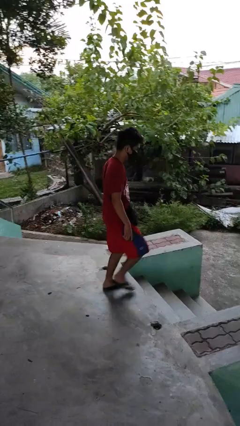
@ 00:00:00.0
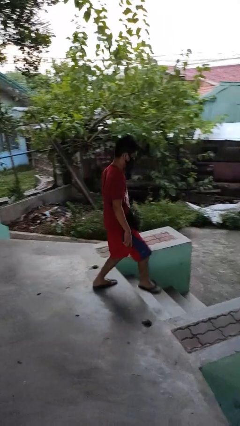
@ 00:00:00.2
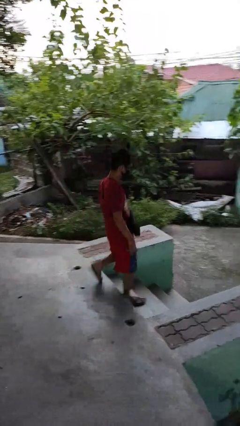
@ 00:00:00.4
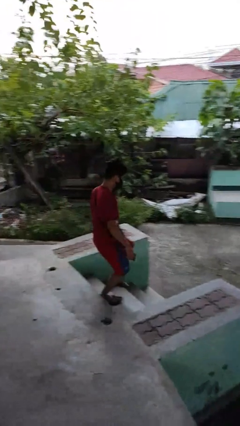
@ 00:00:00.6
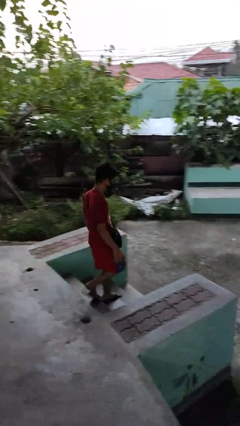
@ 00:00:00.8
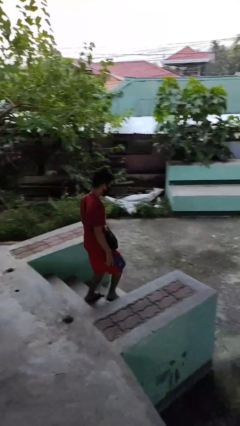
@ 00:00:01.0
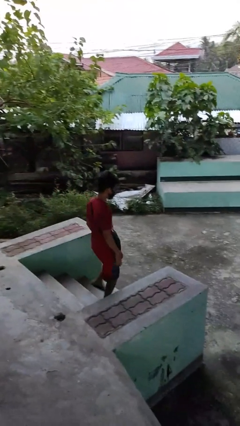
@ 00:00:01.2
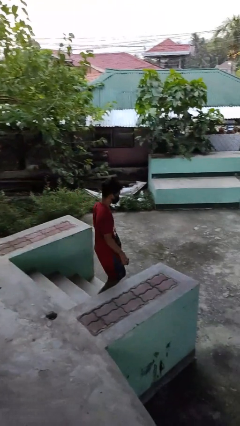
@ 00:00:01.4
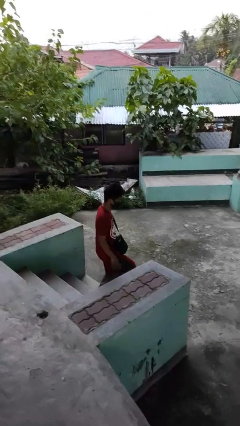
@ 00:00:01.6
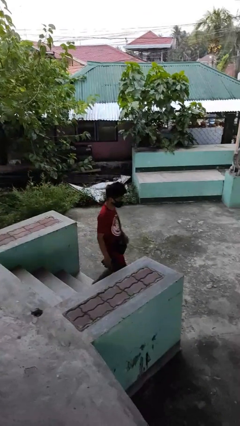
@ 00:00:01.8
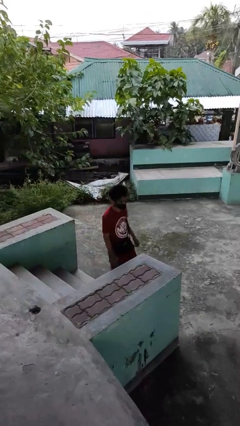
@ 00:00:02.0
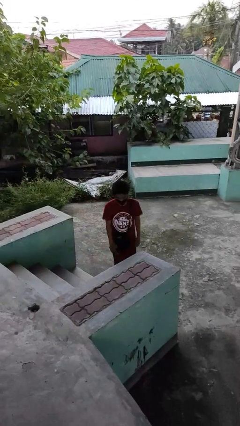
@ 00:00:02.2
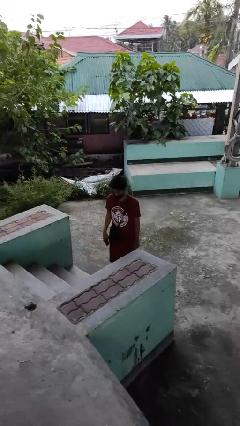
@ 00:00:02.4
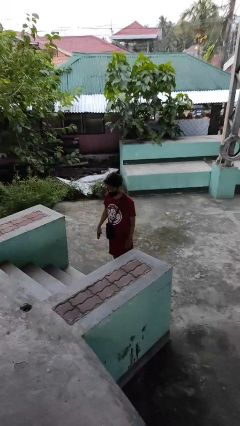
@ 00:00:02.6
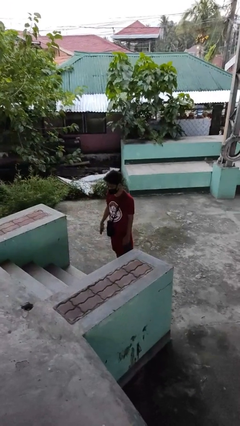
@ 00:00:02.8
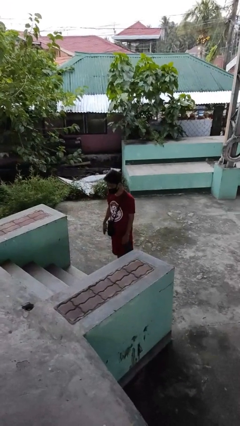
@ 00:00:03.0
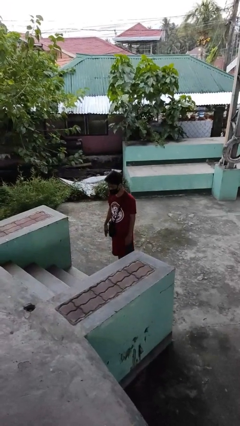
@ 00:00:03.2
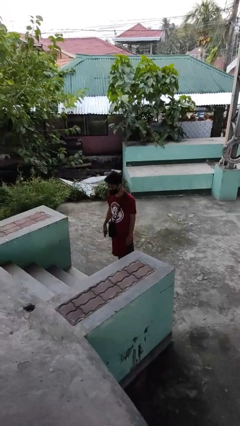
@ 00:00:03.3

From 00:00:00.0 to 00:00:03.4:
person climbs down stairs

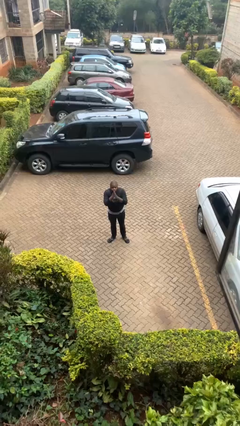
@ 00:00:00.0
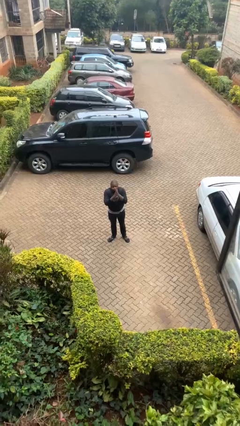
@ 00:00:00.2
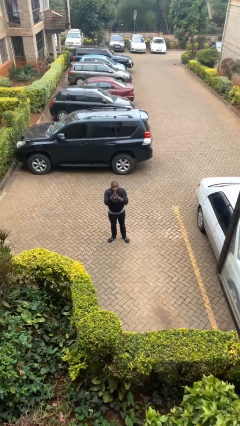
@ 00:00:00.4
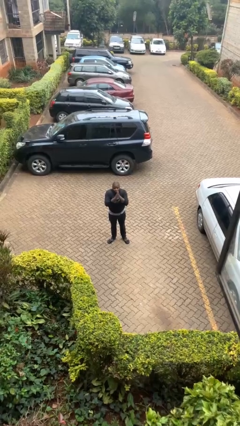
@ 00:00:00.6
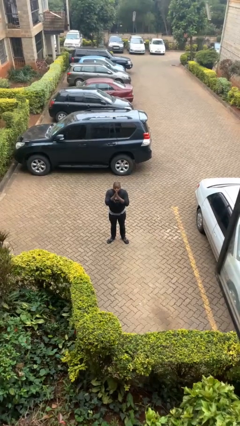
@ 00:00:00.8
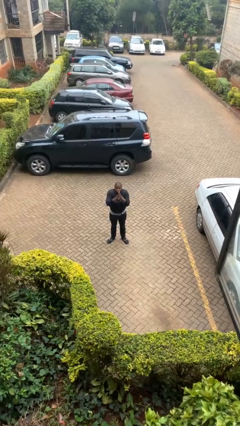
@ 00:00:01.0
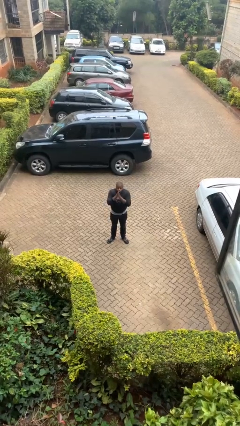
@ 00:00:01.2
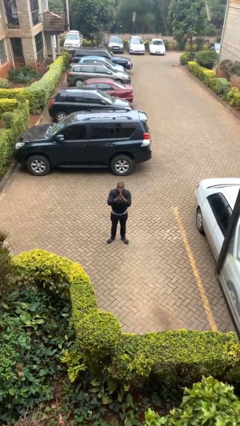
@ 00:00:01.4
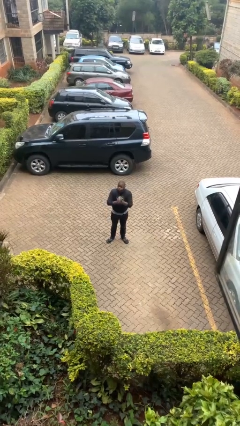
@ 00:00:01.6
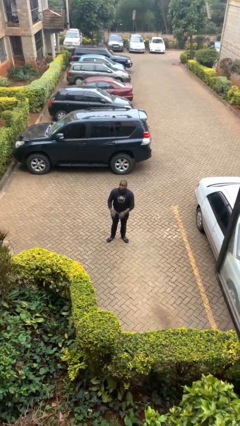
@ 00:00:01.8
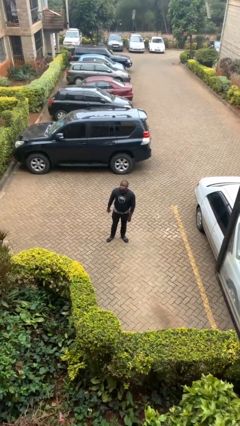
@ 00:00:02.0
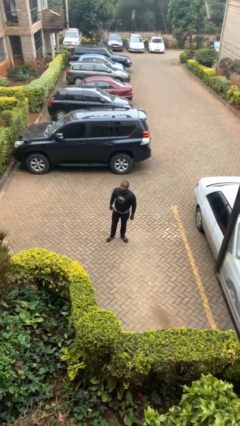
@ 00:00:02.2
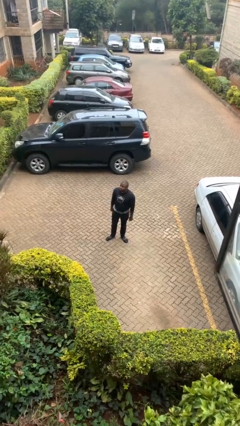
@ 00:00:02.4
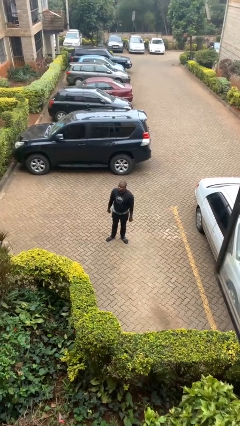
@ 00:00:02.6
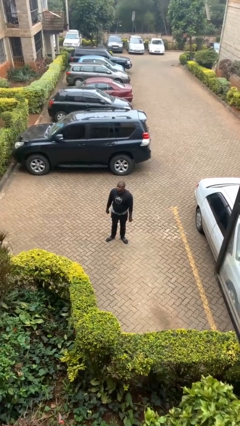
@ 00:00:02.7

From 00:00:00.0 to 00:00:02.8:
person blows into hands

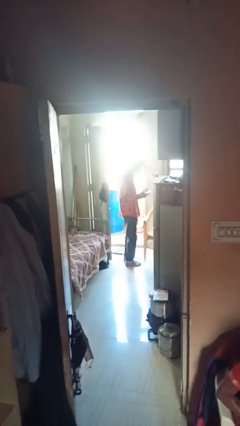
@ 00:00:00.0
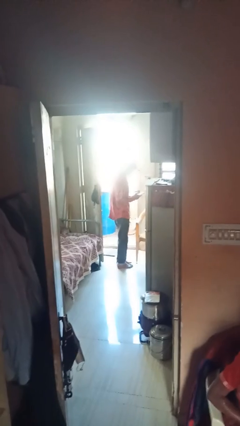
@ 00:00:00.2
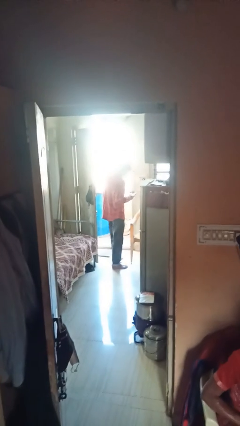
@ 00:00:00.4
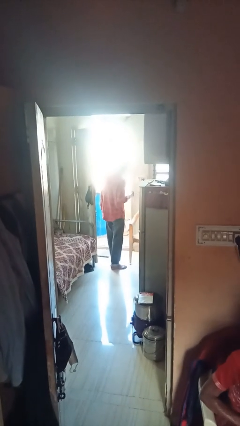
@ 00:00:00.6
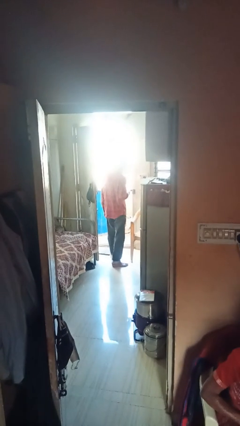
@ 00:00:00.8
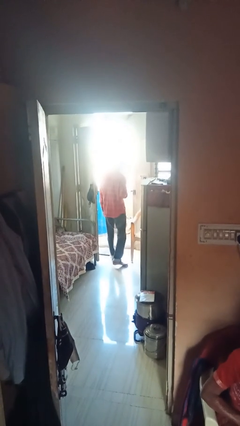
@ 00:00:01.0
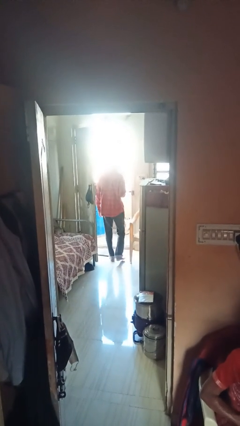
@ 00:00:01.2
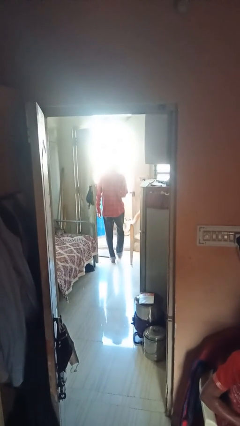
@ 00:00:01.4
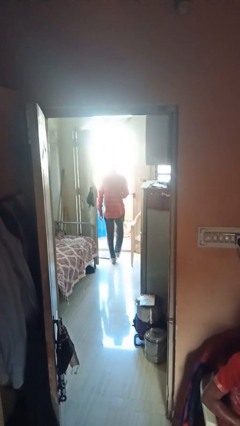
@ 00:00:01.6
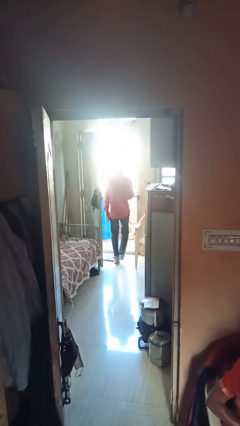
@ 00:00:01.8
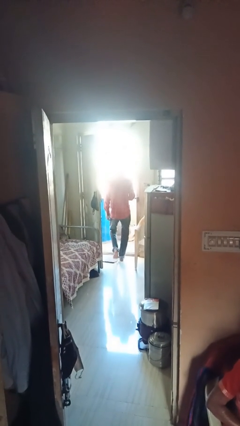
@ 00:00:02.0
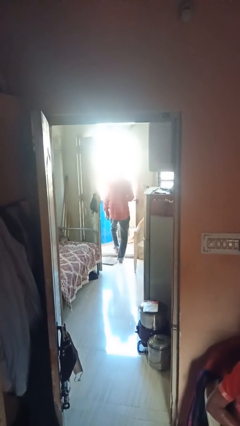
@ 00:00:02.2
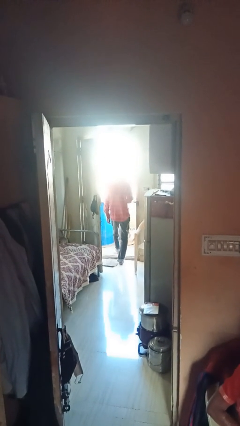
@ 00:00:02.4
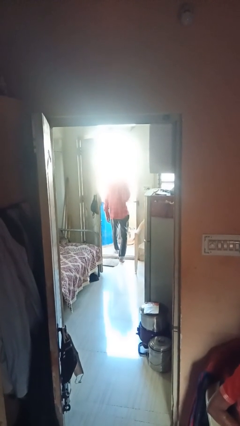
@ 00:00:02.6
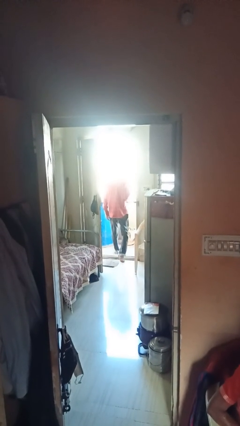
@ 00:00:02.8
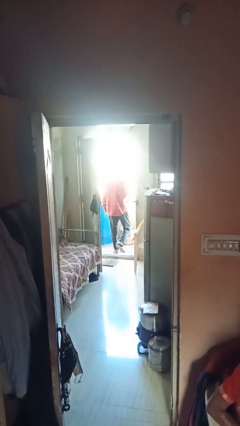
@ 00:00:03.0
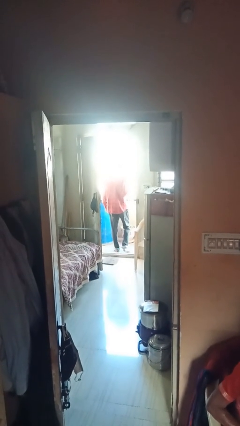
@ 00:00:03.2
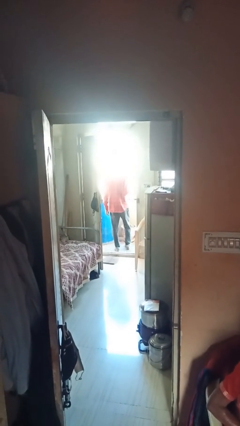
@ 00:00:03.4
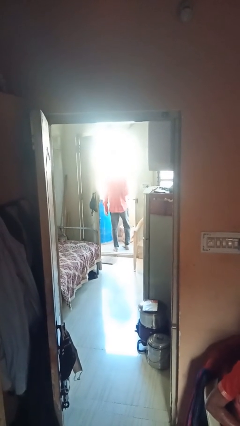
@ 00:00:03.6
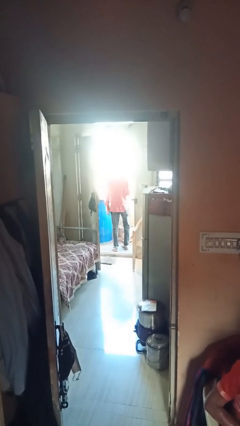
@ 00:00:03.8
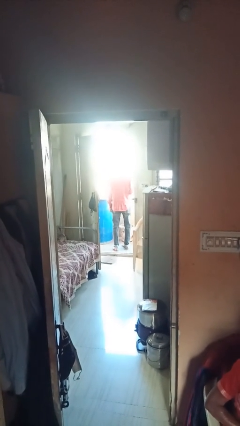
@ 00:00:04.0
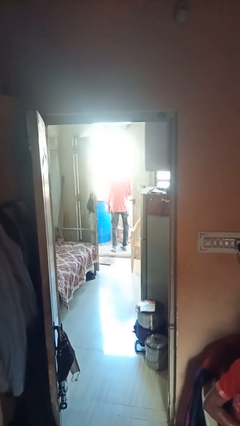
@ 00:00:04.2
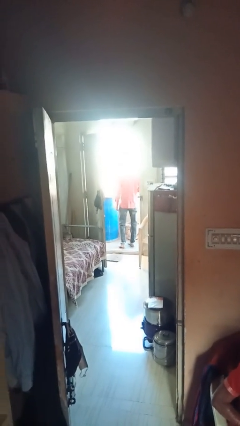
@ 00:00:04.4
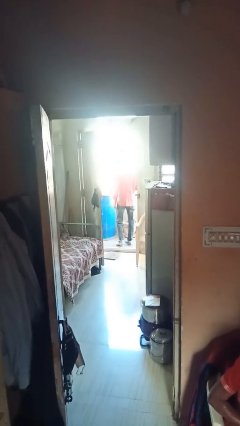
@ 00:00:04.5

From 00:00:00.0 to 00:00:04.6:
person exits scene through structure

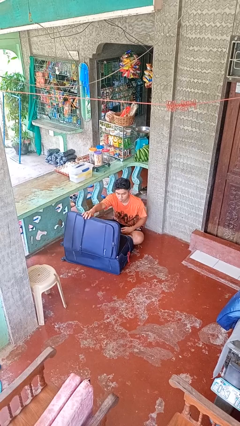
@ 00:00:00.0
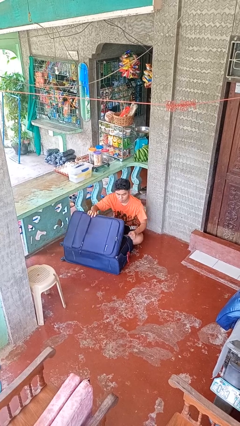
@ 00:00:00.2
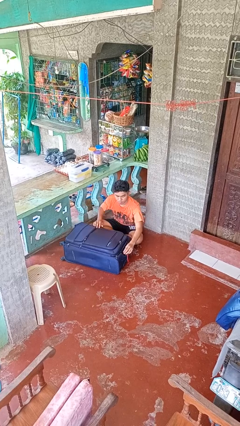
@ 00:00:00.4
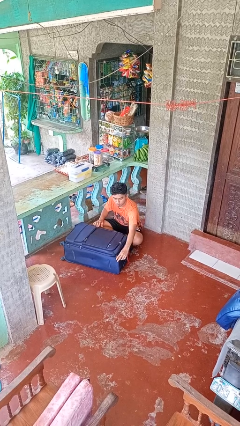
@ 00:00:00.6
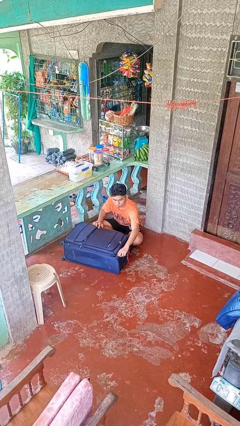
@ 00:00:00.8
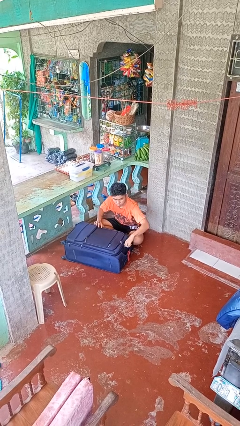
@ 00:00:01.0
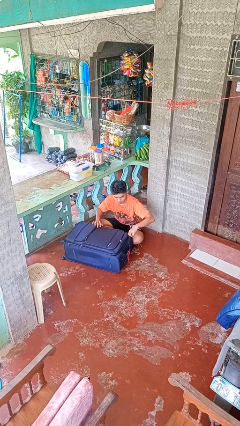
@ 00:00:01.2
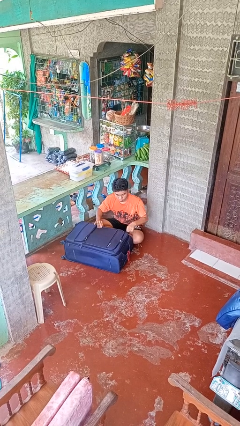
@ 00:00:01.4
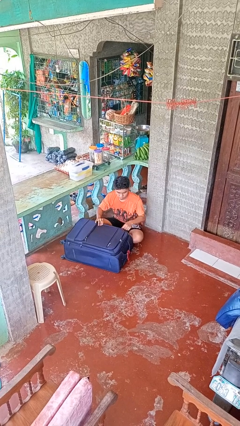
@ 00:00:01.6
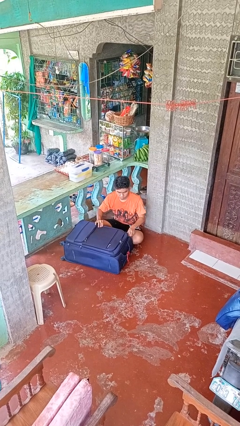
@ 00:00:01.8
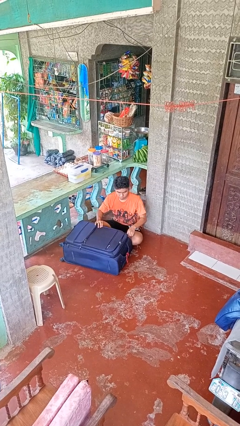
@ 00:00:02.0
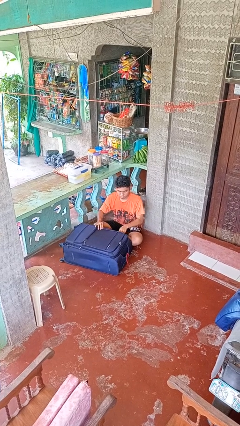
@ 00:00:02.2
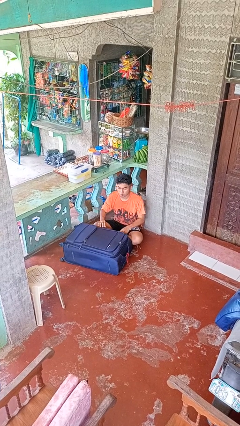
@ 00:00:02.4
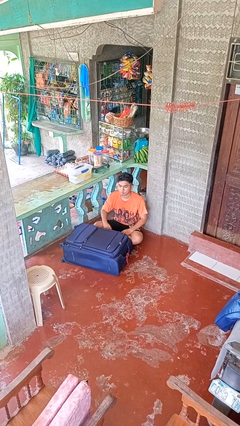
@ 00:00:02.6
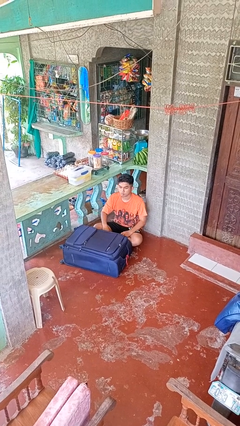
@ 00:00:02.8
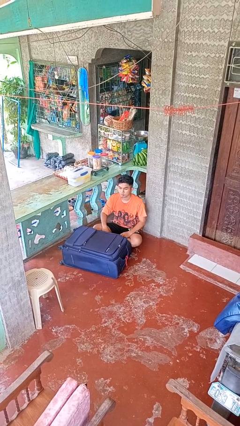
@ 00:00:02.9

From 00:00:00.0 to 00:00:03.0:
person closes suitcase

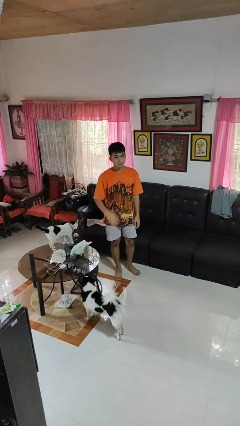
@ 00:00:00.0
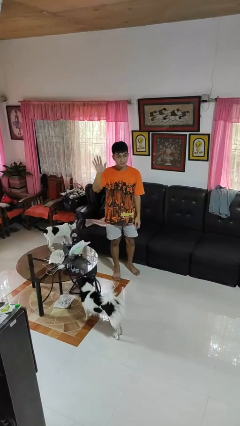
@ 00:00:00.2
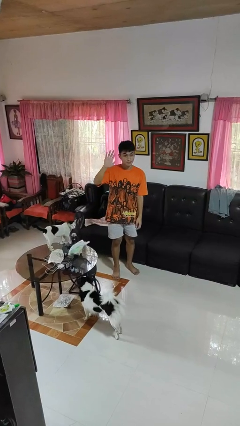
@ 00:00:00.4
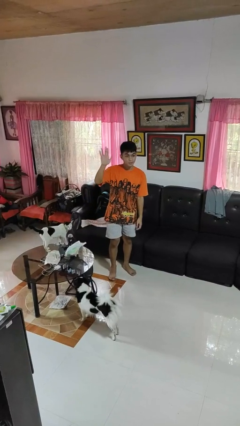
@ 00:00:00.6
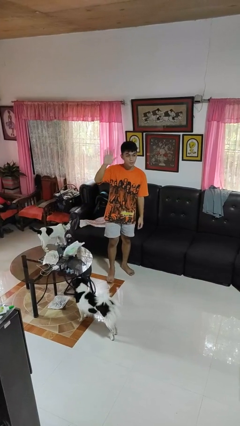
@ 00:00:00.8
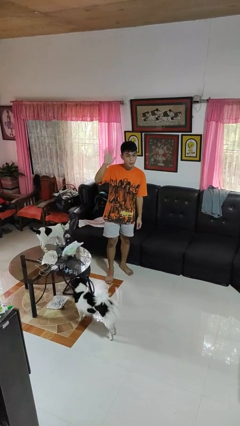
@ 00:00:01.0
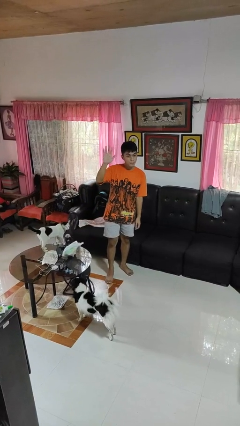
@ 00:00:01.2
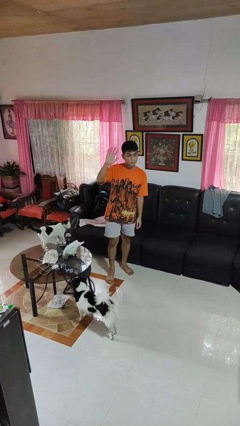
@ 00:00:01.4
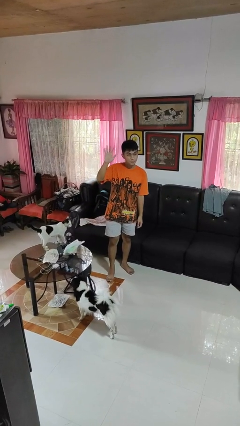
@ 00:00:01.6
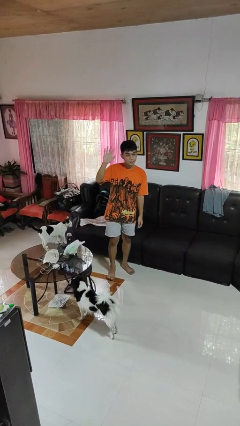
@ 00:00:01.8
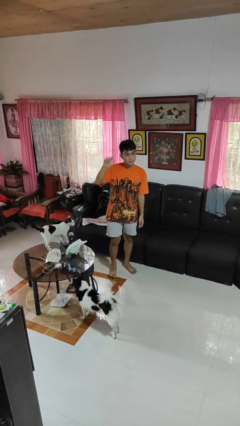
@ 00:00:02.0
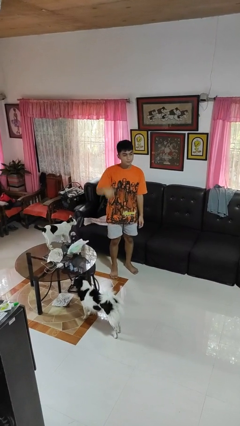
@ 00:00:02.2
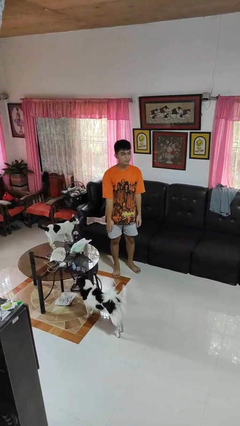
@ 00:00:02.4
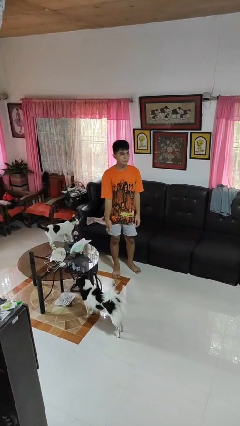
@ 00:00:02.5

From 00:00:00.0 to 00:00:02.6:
person waves at person

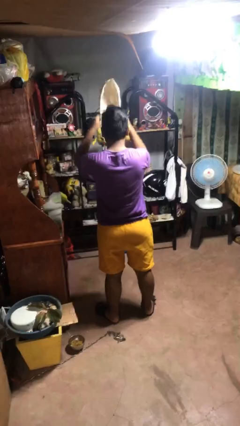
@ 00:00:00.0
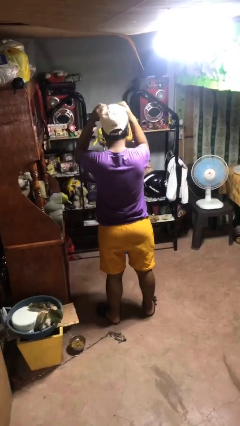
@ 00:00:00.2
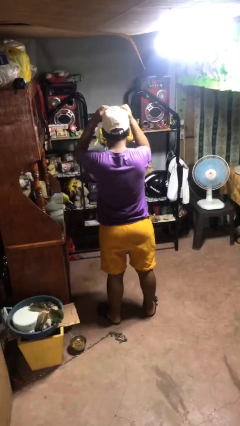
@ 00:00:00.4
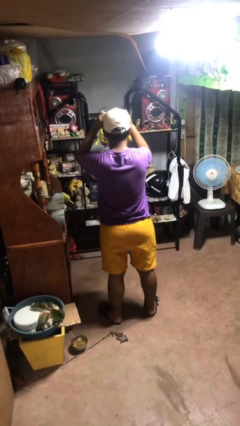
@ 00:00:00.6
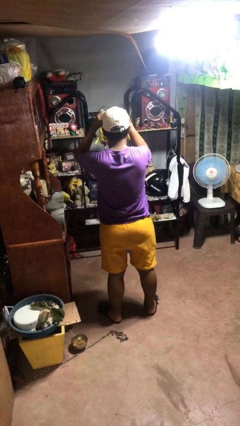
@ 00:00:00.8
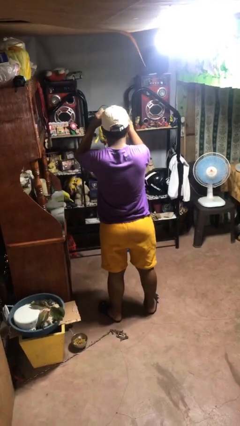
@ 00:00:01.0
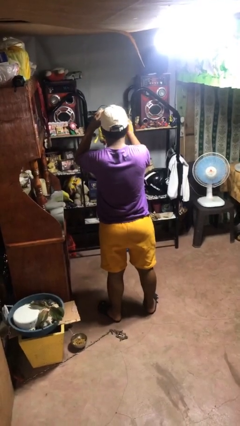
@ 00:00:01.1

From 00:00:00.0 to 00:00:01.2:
person puts on hat
